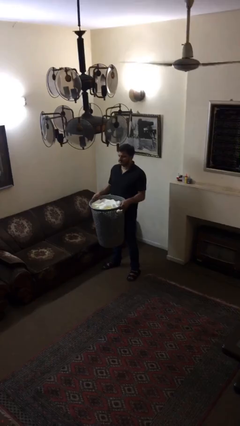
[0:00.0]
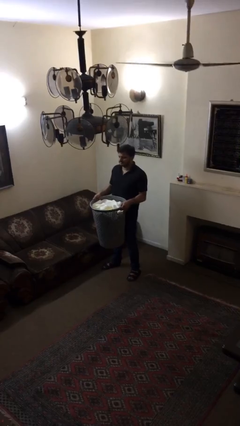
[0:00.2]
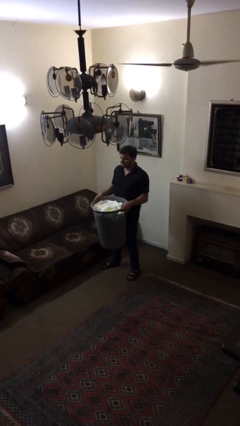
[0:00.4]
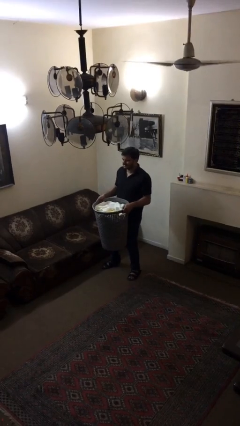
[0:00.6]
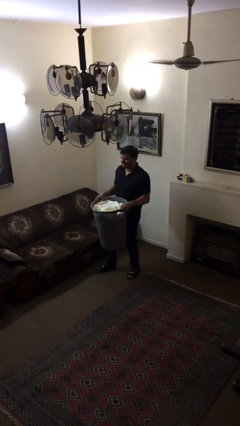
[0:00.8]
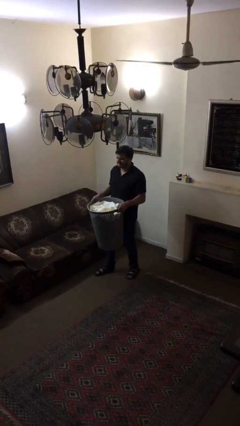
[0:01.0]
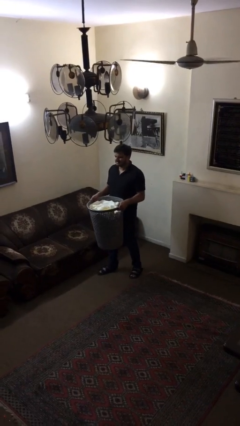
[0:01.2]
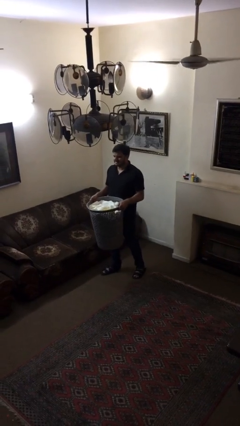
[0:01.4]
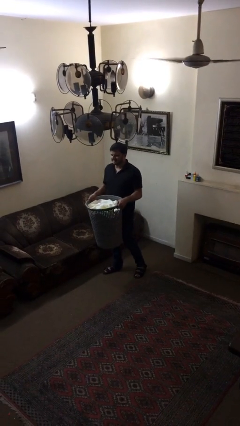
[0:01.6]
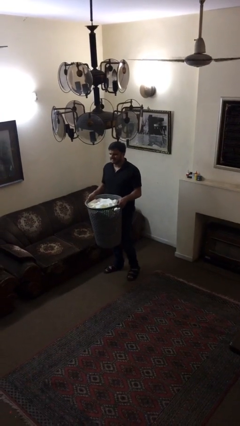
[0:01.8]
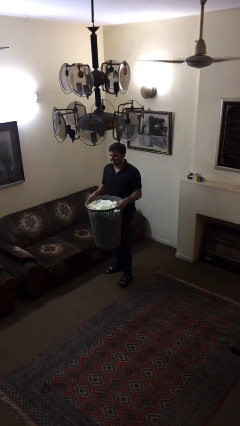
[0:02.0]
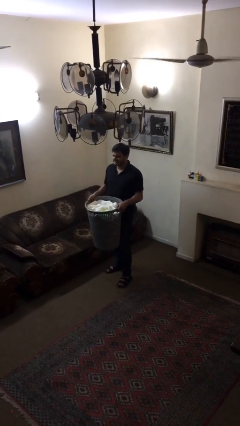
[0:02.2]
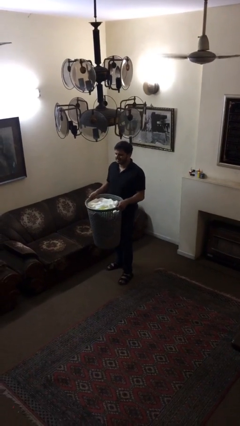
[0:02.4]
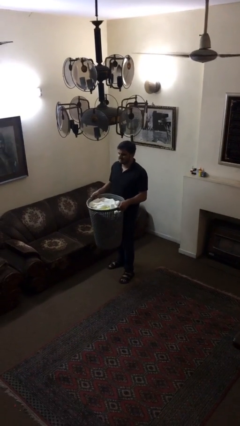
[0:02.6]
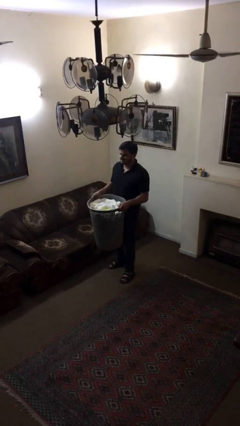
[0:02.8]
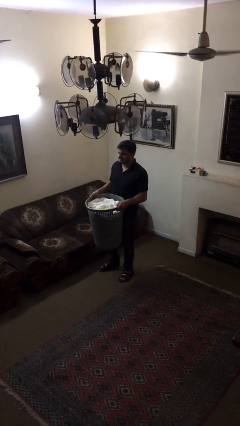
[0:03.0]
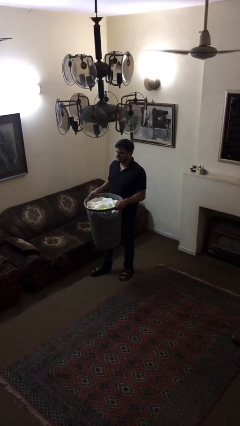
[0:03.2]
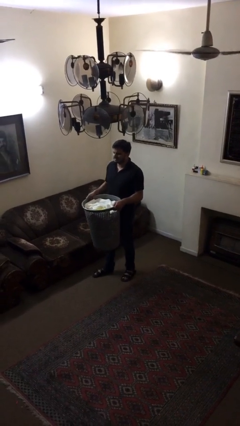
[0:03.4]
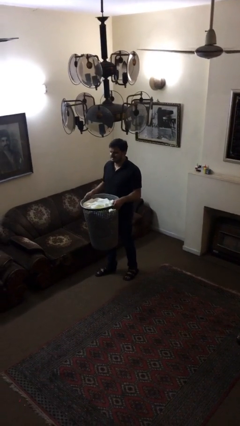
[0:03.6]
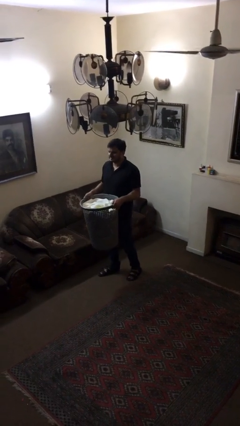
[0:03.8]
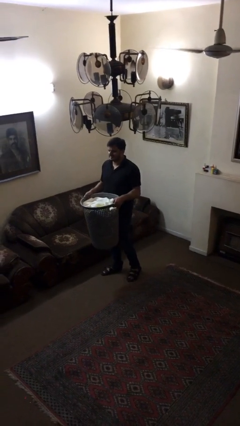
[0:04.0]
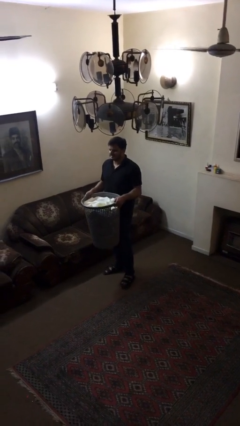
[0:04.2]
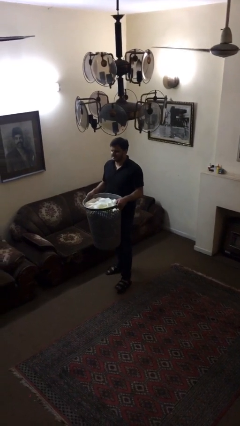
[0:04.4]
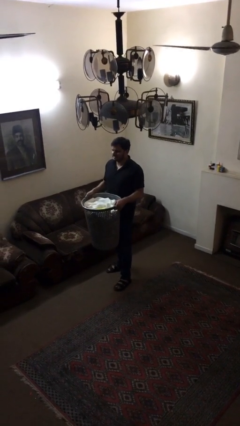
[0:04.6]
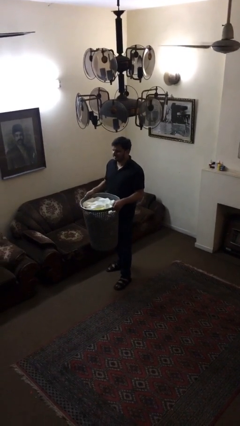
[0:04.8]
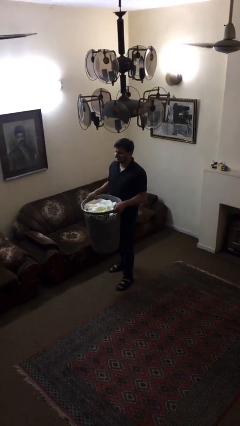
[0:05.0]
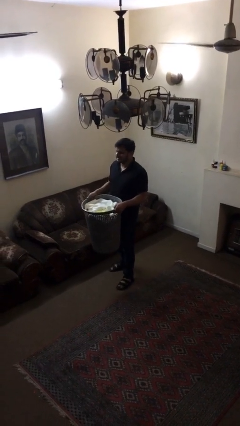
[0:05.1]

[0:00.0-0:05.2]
person carries heavy object

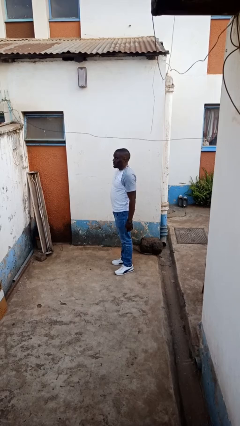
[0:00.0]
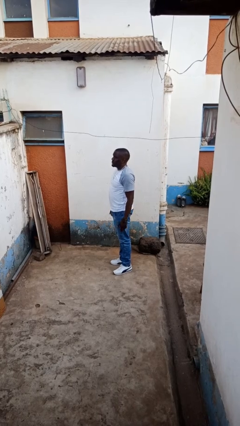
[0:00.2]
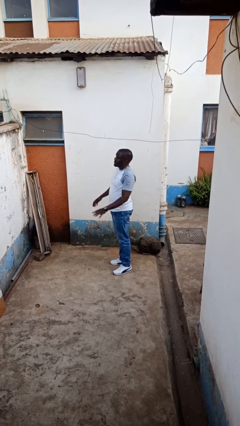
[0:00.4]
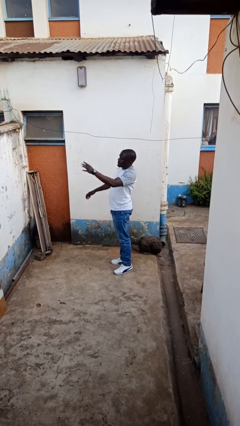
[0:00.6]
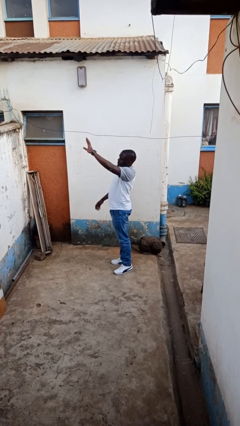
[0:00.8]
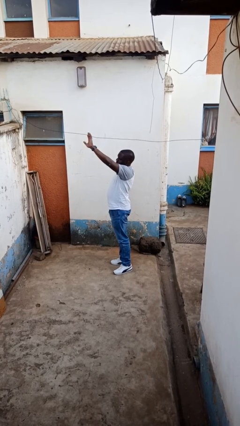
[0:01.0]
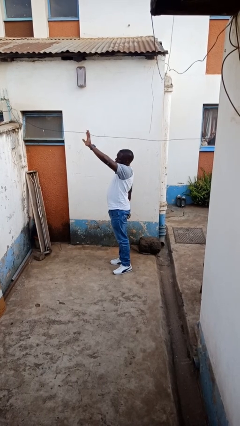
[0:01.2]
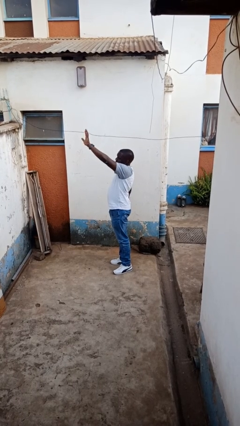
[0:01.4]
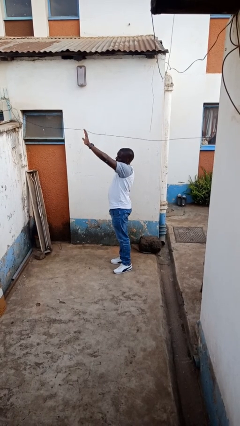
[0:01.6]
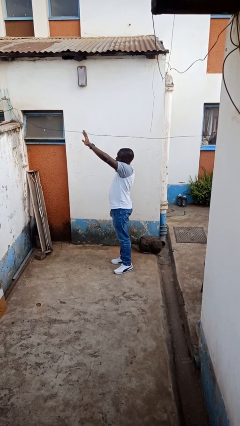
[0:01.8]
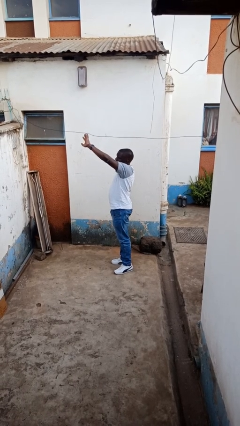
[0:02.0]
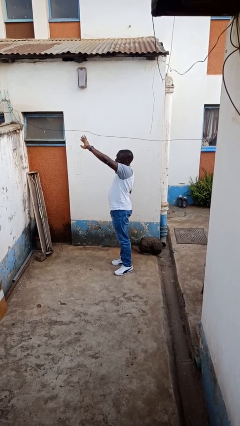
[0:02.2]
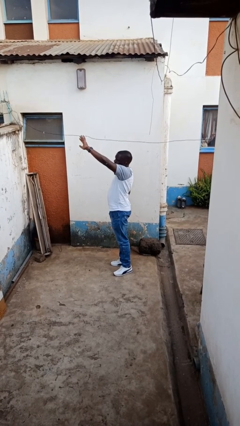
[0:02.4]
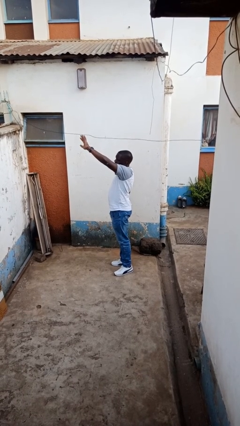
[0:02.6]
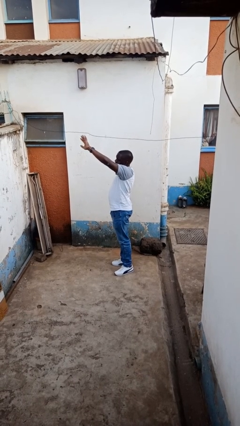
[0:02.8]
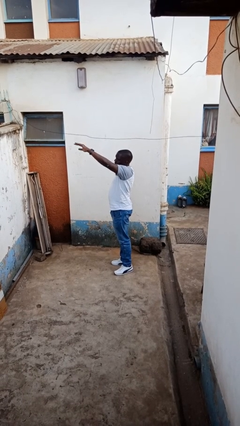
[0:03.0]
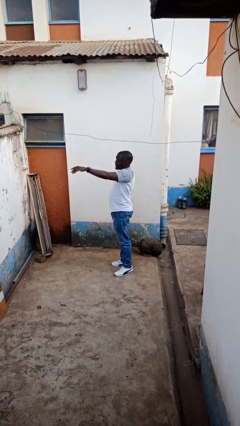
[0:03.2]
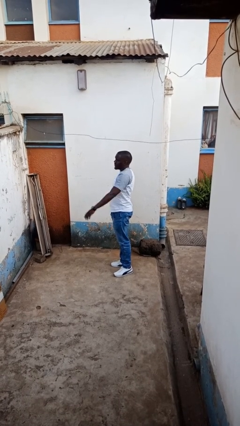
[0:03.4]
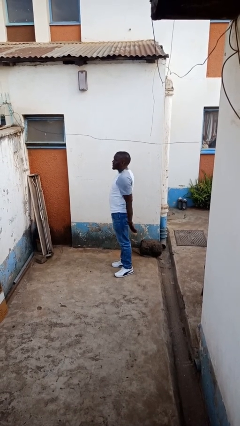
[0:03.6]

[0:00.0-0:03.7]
person waves at person

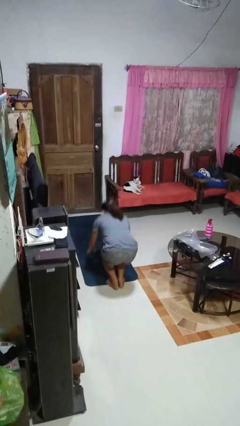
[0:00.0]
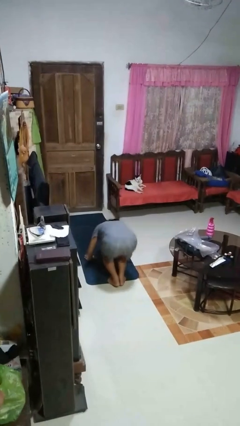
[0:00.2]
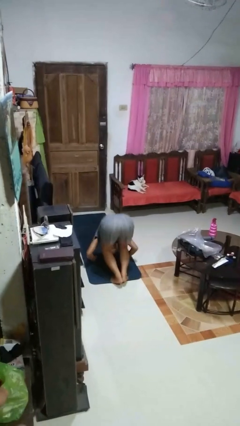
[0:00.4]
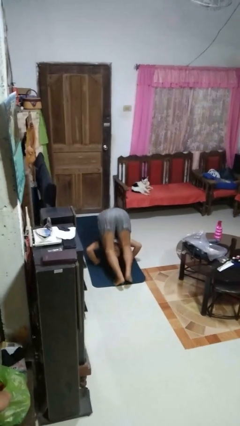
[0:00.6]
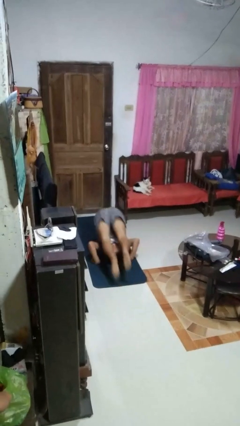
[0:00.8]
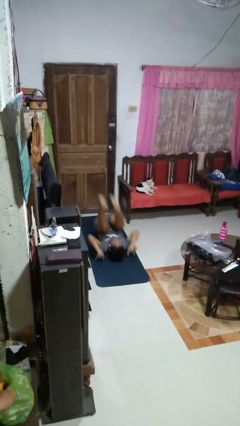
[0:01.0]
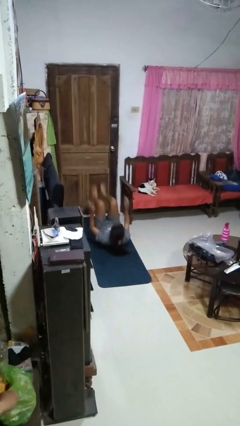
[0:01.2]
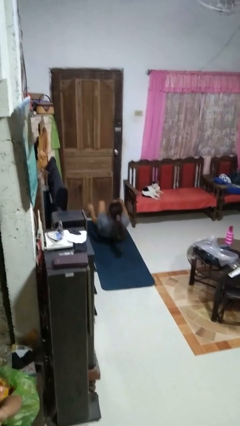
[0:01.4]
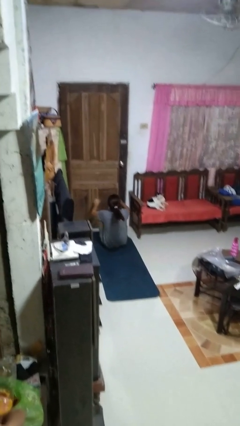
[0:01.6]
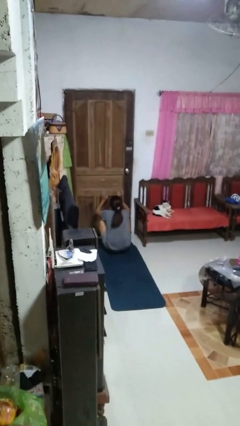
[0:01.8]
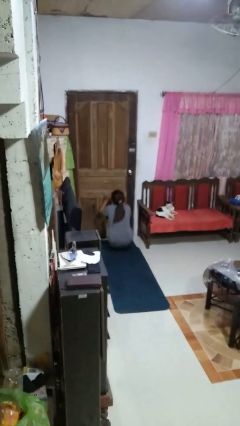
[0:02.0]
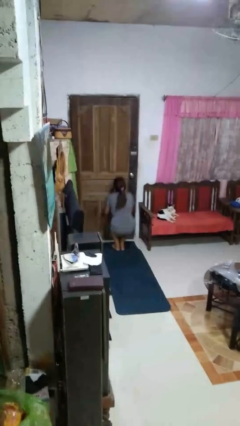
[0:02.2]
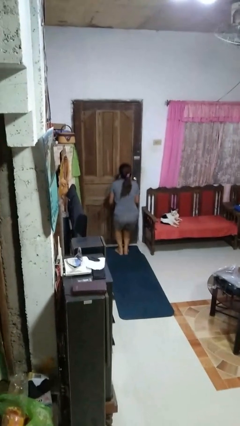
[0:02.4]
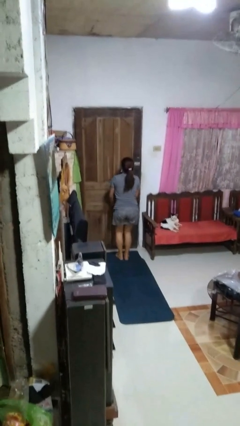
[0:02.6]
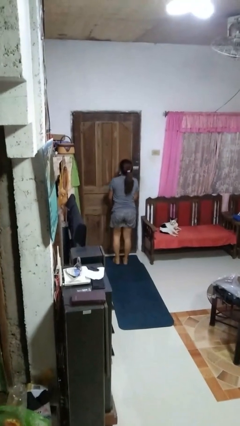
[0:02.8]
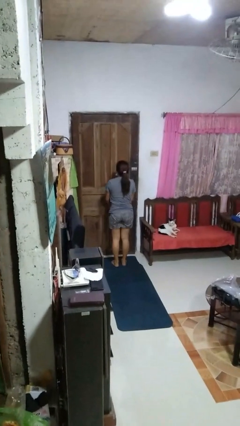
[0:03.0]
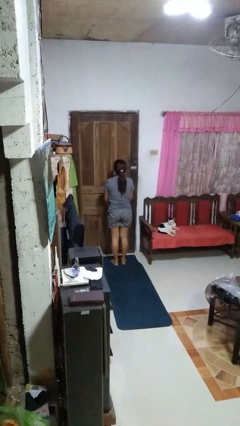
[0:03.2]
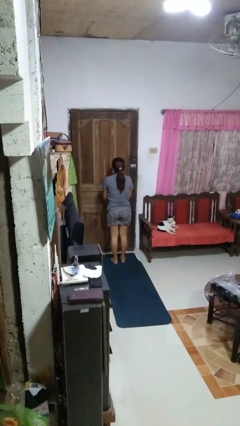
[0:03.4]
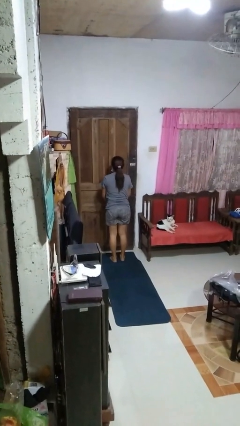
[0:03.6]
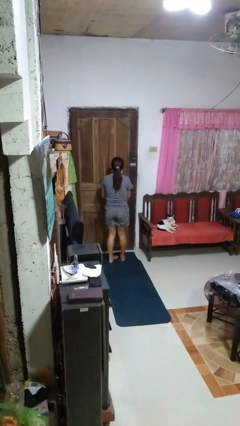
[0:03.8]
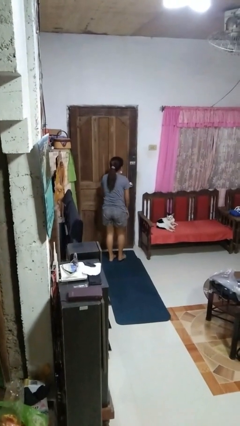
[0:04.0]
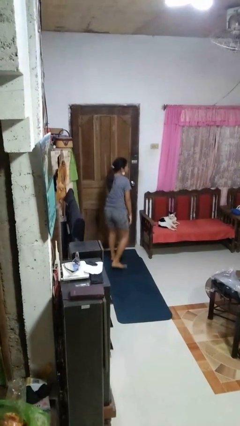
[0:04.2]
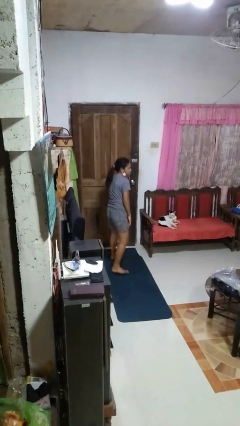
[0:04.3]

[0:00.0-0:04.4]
person somersaults

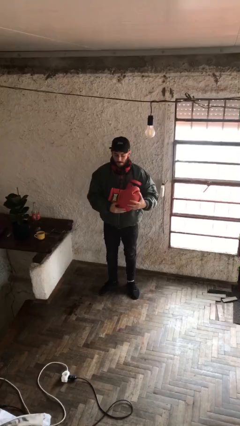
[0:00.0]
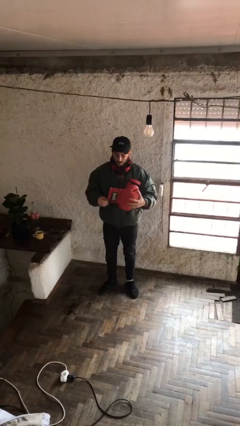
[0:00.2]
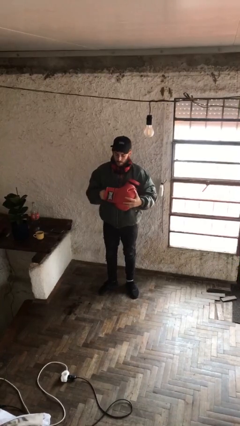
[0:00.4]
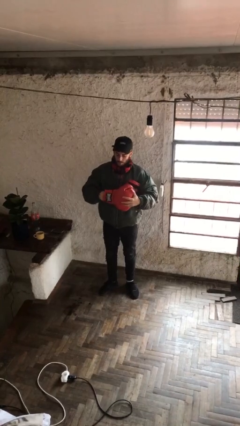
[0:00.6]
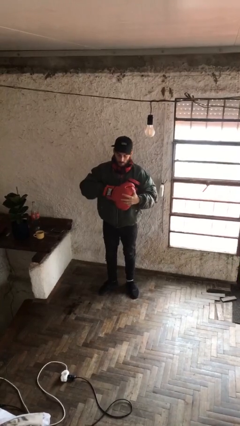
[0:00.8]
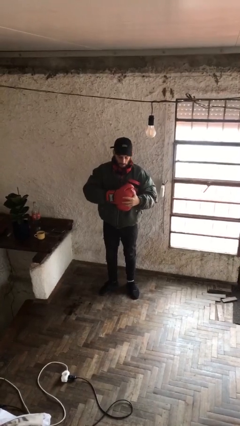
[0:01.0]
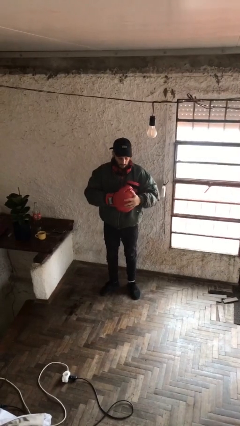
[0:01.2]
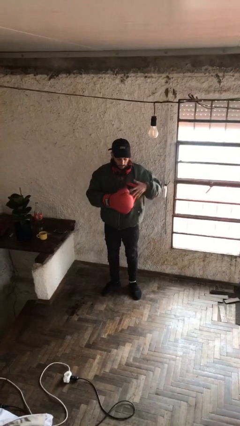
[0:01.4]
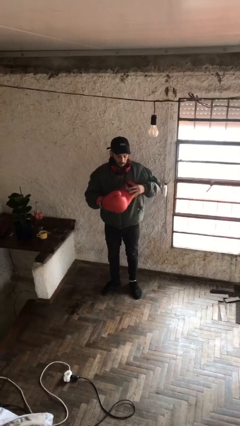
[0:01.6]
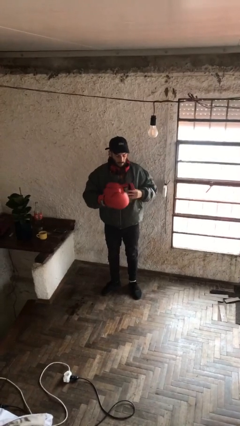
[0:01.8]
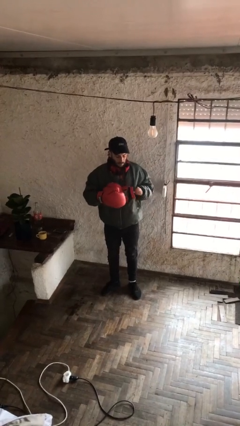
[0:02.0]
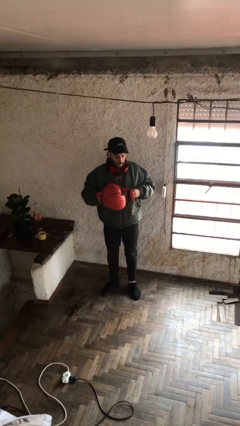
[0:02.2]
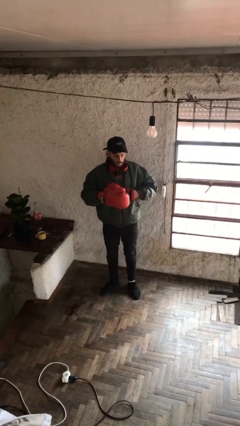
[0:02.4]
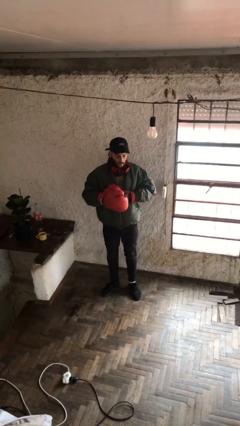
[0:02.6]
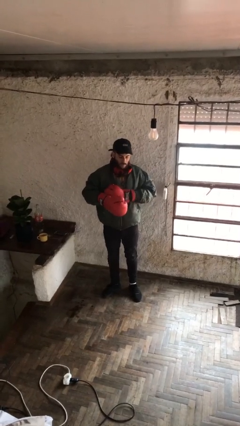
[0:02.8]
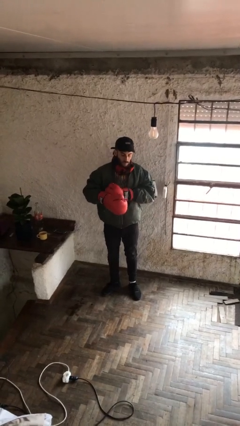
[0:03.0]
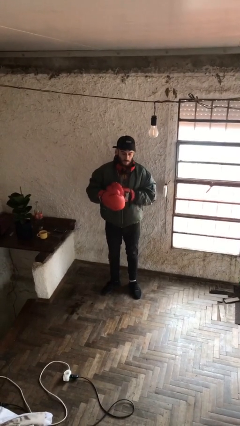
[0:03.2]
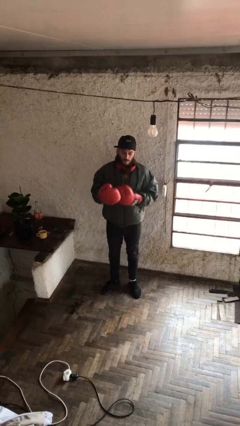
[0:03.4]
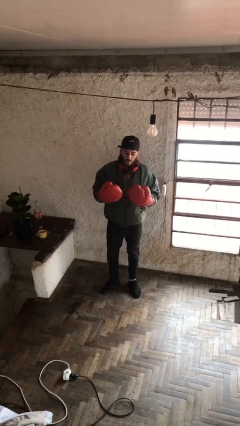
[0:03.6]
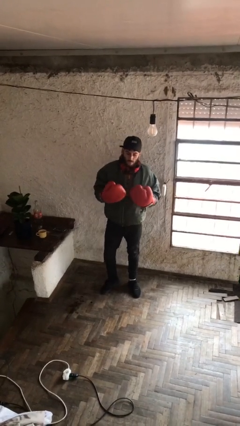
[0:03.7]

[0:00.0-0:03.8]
person puts on gloves

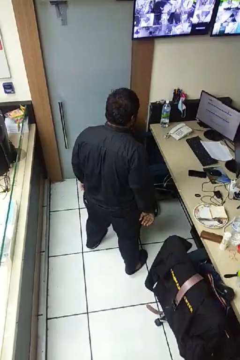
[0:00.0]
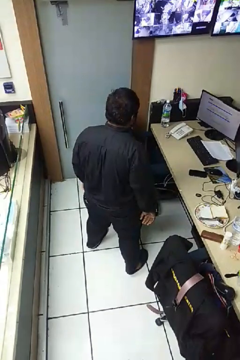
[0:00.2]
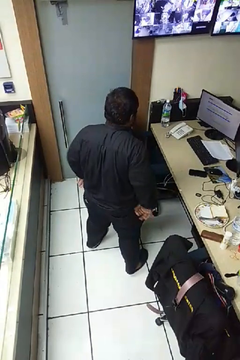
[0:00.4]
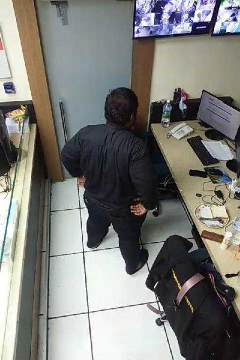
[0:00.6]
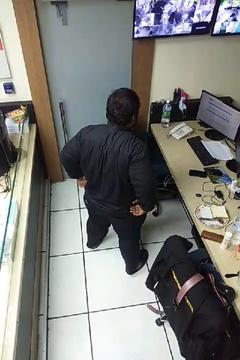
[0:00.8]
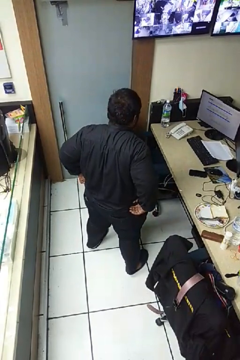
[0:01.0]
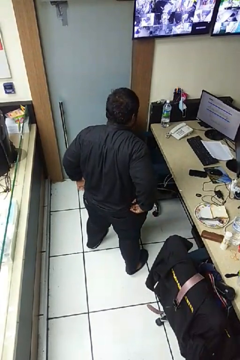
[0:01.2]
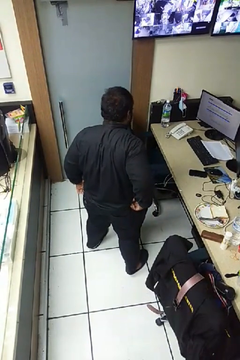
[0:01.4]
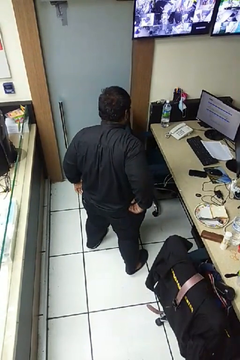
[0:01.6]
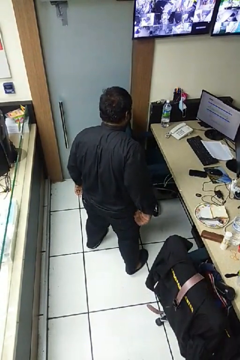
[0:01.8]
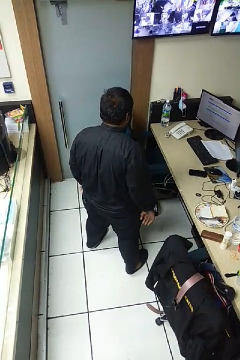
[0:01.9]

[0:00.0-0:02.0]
person hikes up pants
